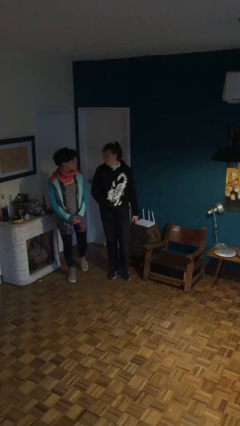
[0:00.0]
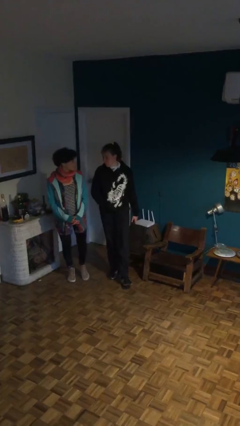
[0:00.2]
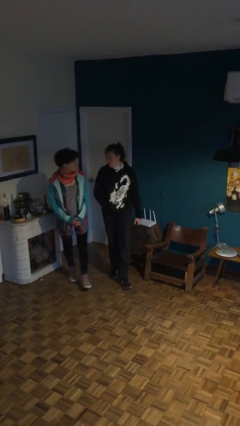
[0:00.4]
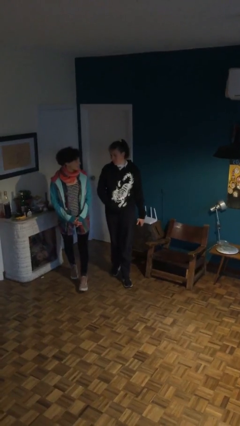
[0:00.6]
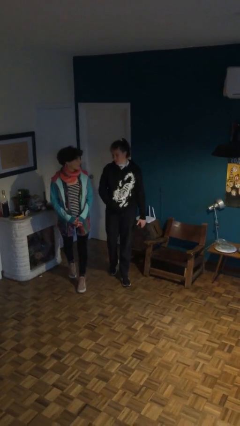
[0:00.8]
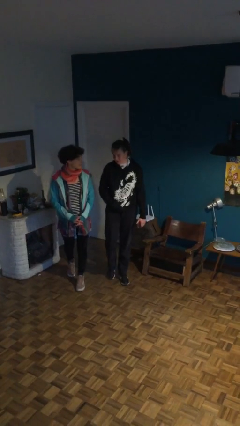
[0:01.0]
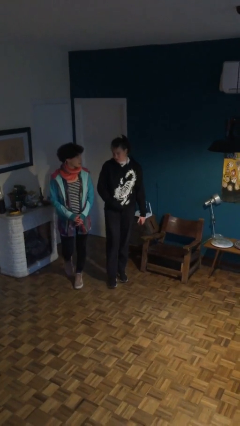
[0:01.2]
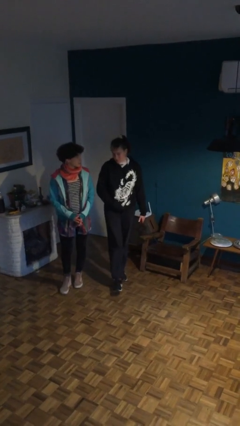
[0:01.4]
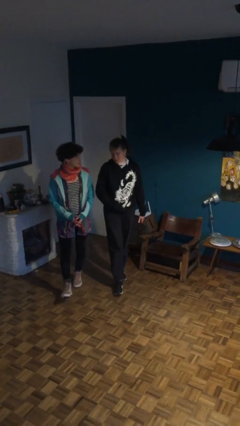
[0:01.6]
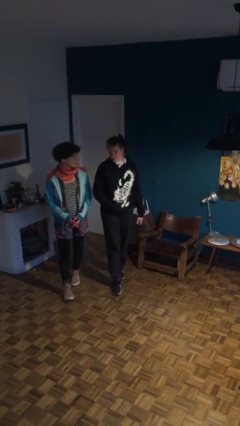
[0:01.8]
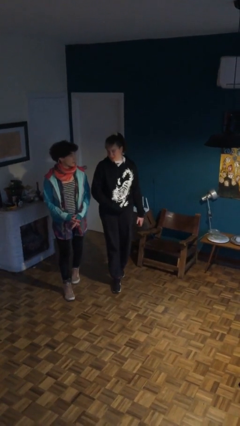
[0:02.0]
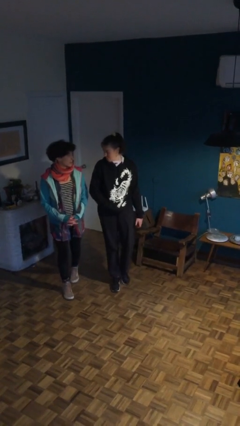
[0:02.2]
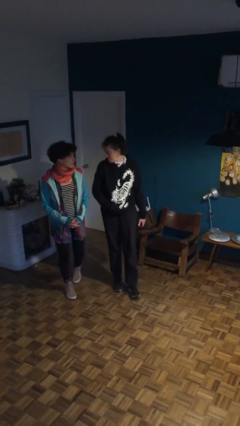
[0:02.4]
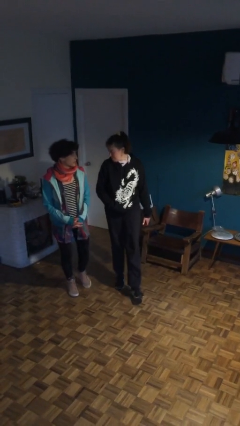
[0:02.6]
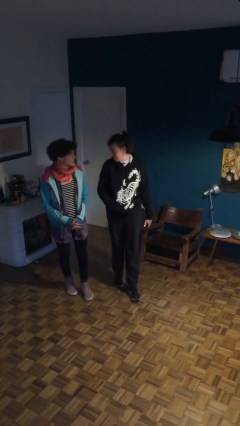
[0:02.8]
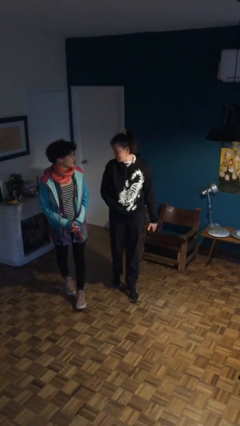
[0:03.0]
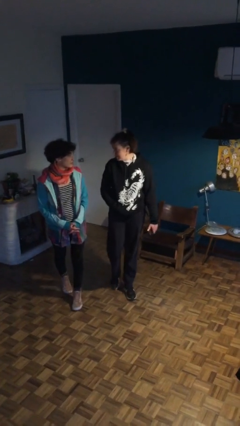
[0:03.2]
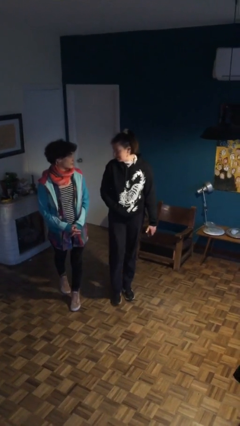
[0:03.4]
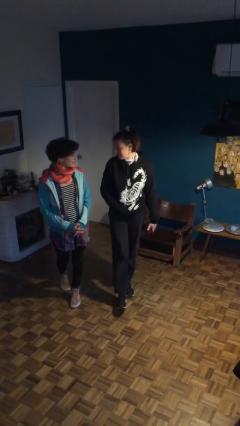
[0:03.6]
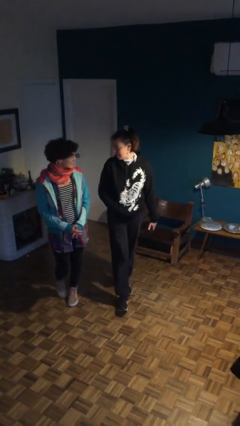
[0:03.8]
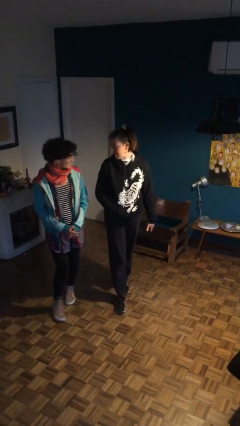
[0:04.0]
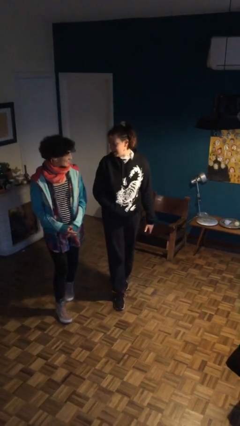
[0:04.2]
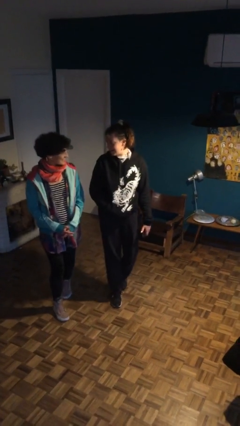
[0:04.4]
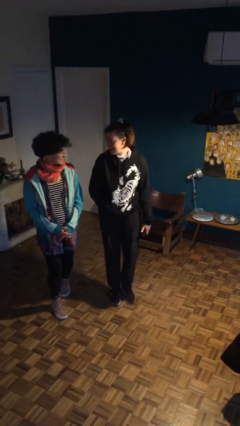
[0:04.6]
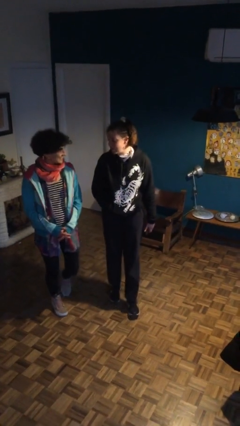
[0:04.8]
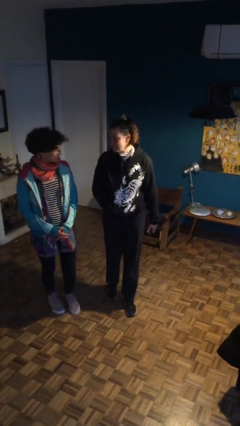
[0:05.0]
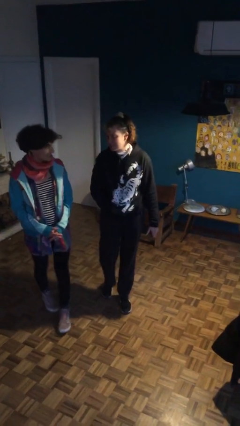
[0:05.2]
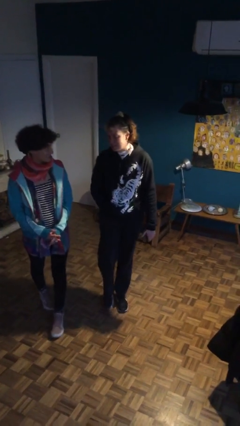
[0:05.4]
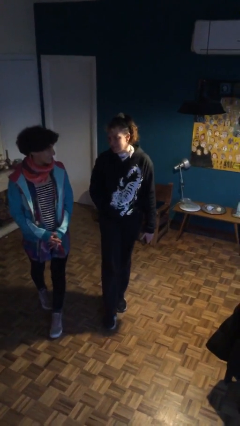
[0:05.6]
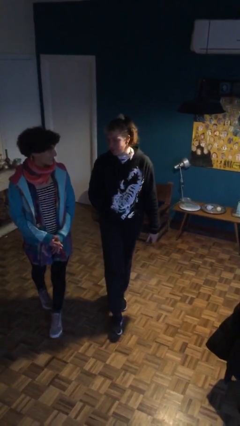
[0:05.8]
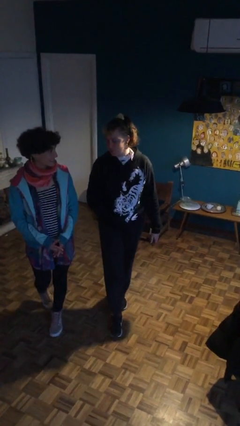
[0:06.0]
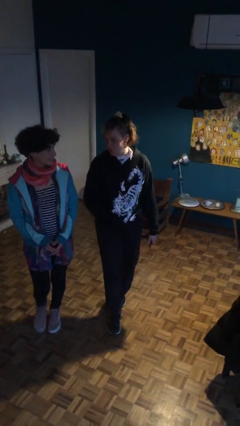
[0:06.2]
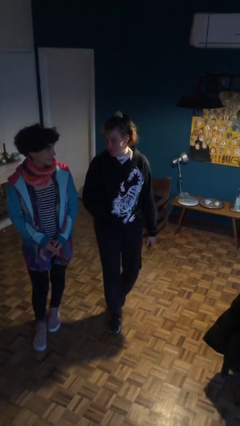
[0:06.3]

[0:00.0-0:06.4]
person talks to person

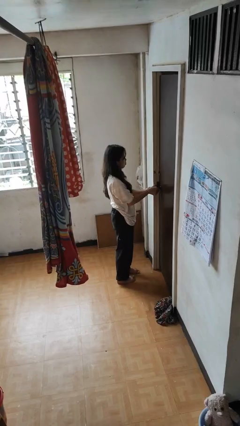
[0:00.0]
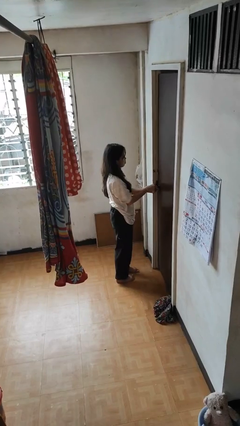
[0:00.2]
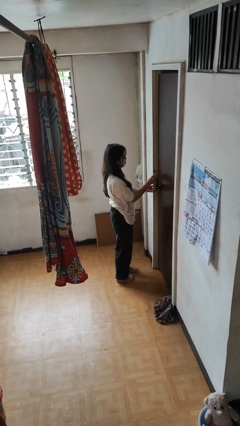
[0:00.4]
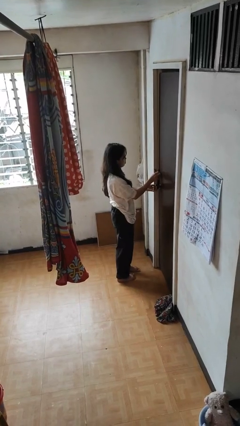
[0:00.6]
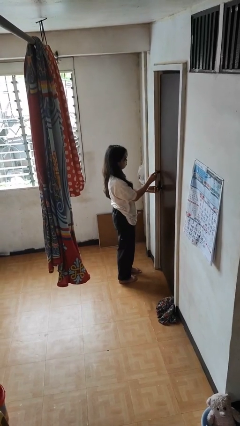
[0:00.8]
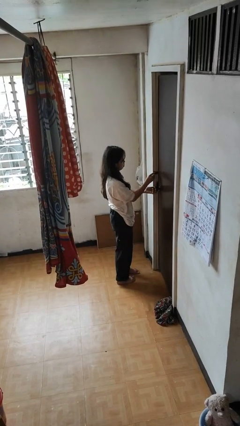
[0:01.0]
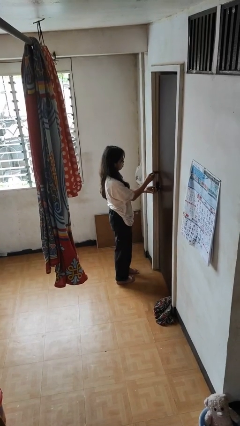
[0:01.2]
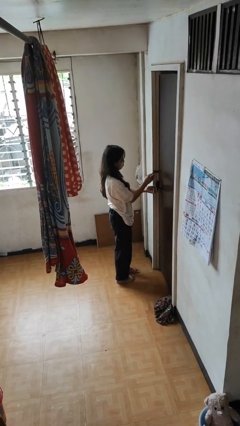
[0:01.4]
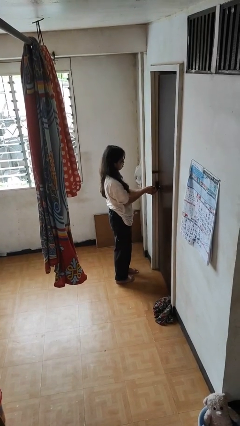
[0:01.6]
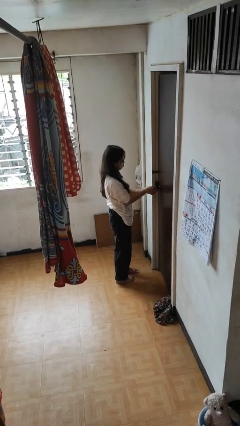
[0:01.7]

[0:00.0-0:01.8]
person locks door with keys

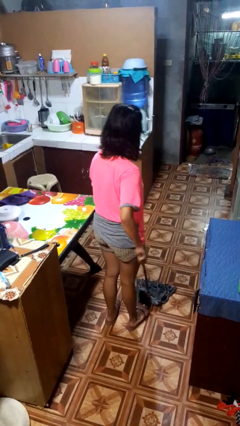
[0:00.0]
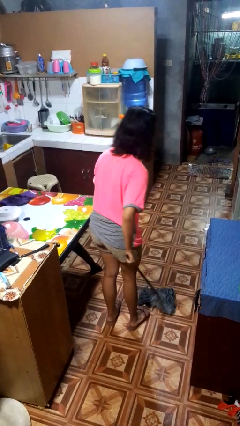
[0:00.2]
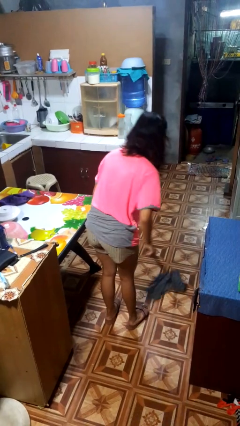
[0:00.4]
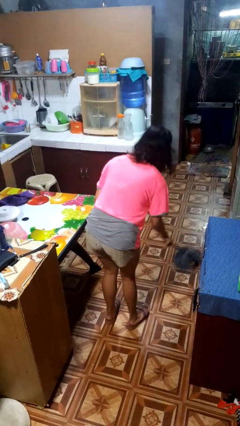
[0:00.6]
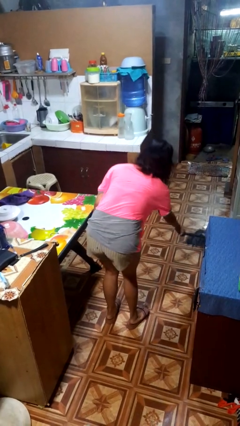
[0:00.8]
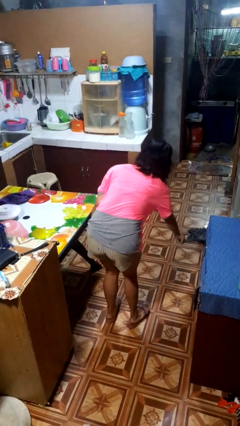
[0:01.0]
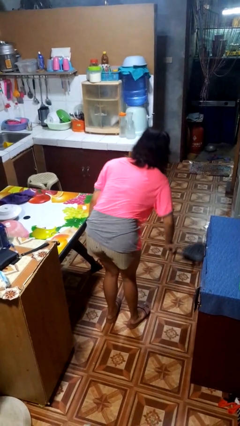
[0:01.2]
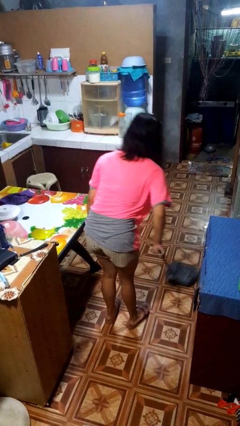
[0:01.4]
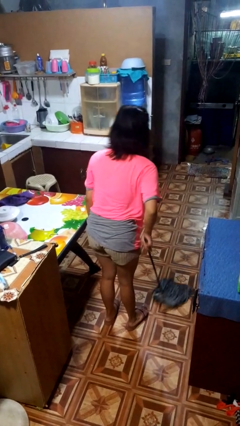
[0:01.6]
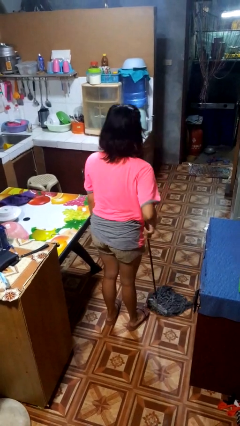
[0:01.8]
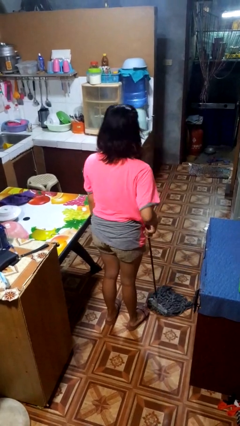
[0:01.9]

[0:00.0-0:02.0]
person mops

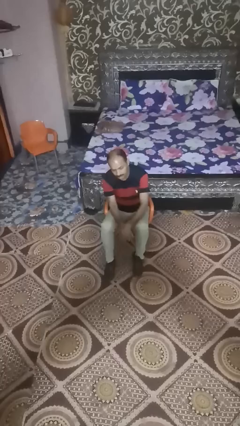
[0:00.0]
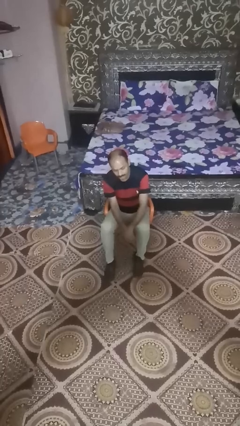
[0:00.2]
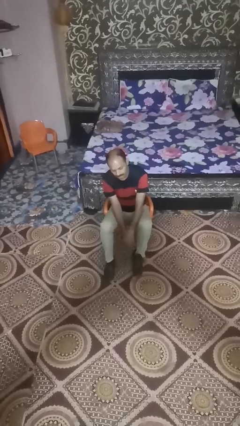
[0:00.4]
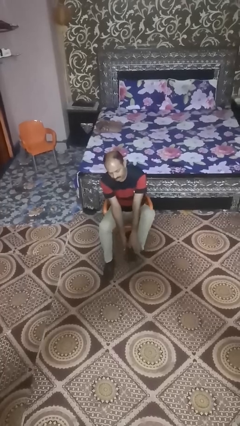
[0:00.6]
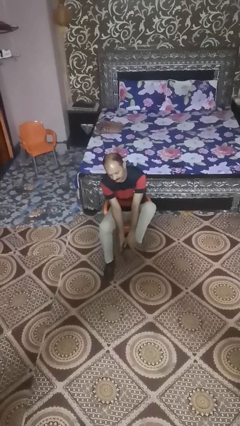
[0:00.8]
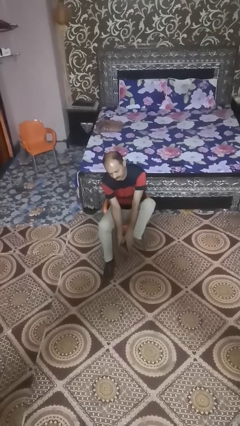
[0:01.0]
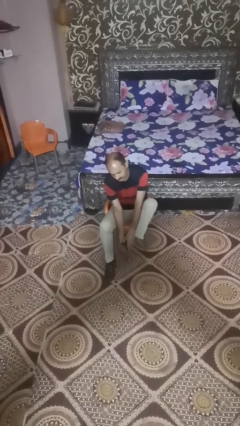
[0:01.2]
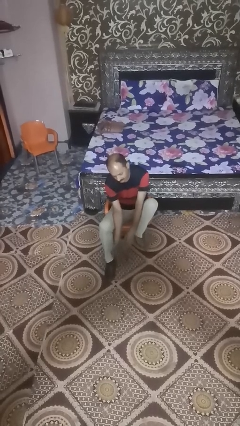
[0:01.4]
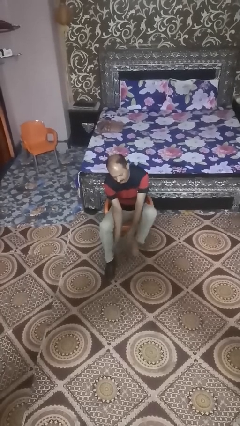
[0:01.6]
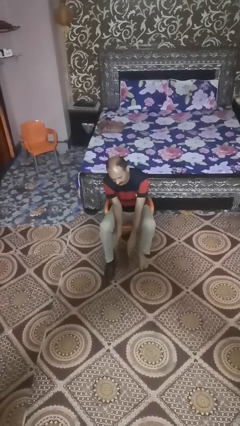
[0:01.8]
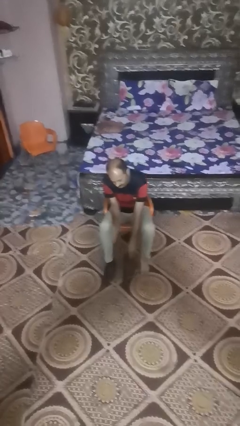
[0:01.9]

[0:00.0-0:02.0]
person takes off boots

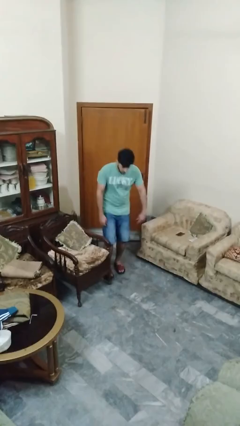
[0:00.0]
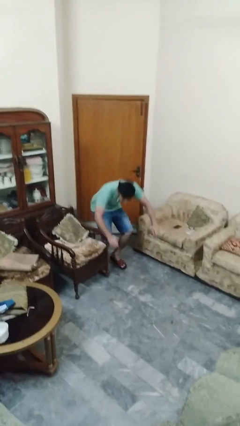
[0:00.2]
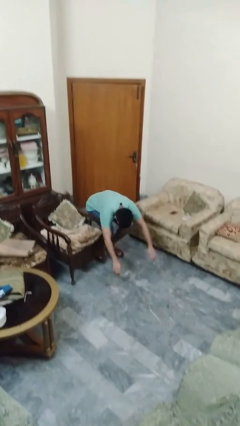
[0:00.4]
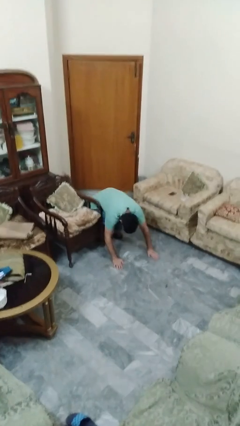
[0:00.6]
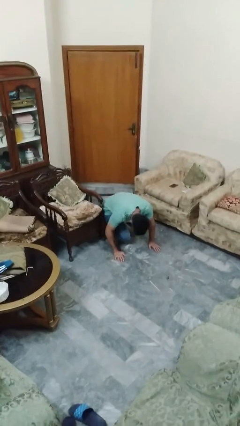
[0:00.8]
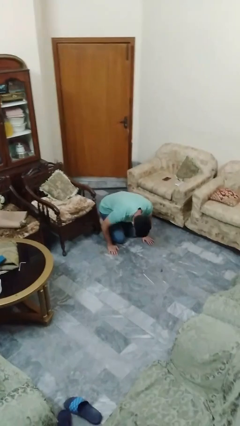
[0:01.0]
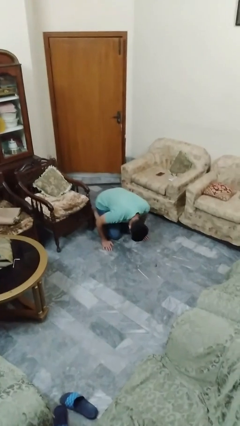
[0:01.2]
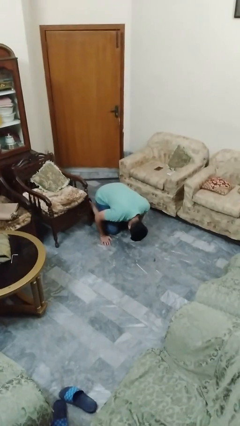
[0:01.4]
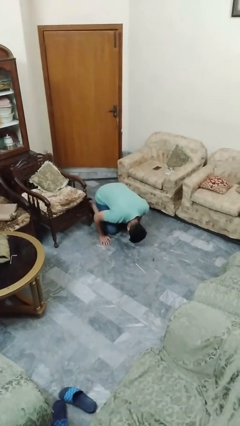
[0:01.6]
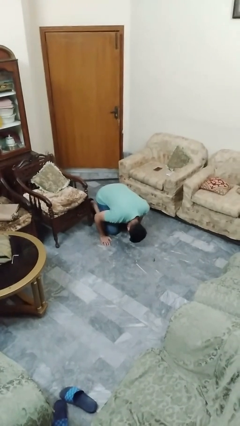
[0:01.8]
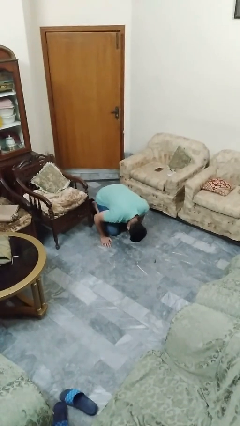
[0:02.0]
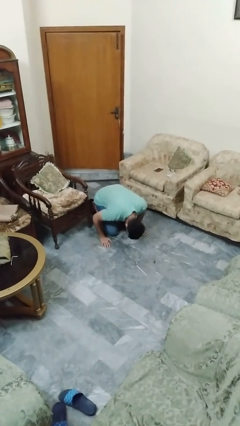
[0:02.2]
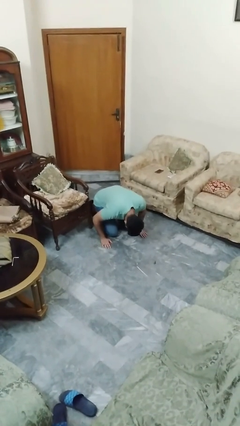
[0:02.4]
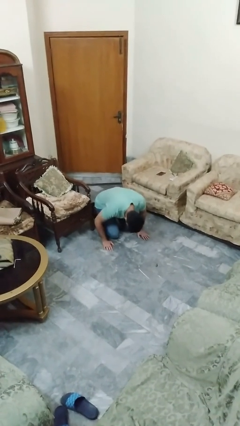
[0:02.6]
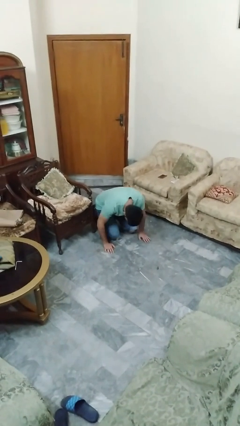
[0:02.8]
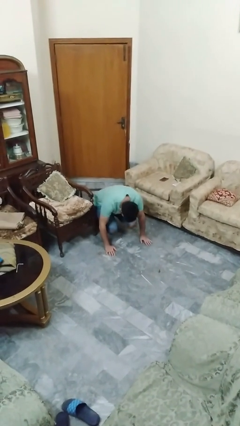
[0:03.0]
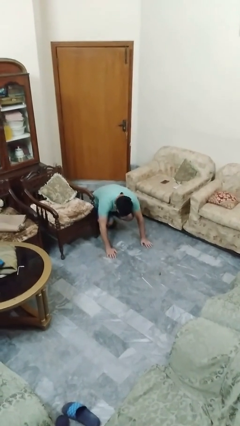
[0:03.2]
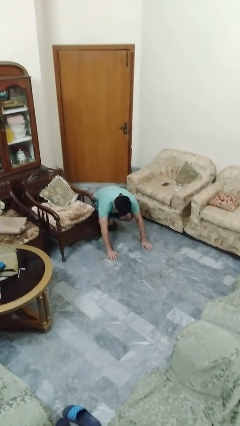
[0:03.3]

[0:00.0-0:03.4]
person trips on object on floor

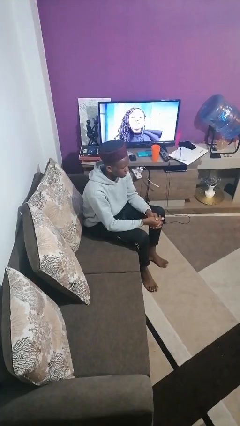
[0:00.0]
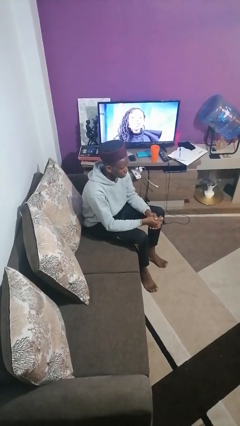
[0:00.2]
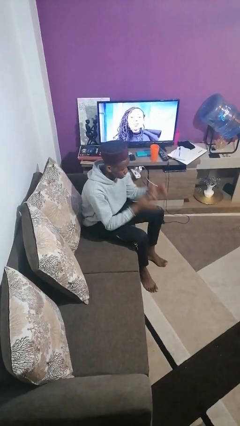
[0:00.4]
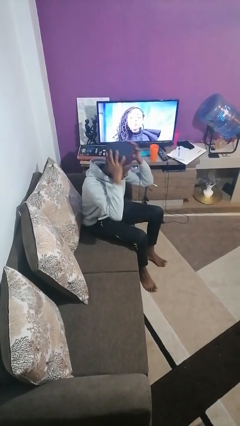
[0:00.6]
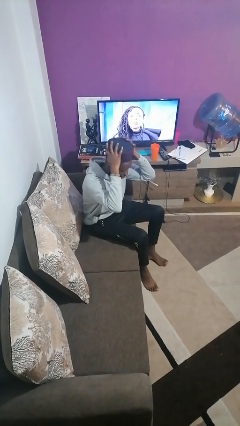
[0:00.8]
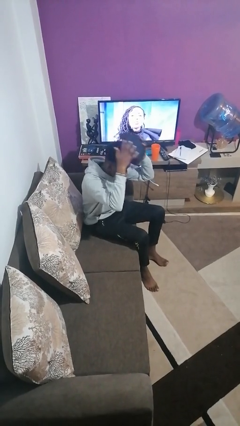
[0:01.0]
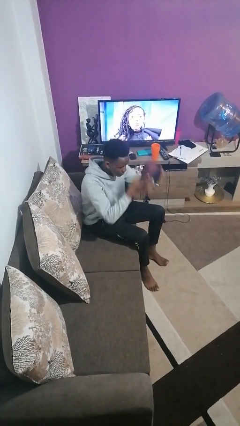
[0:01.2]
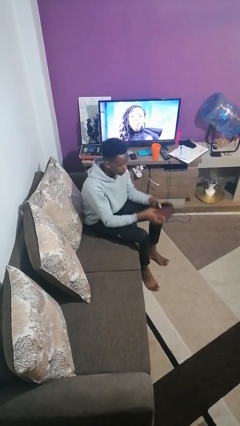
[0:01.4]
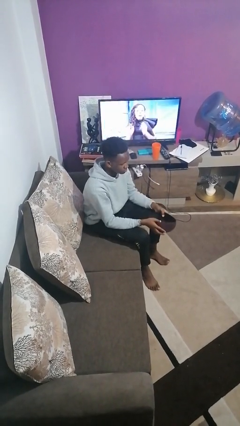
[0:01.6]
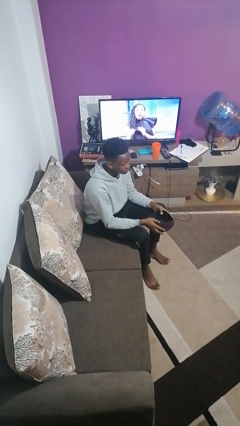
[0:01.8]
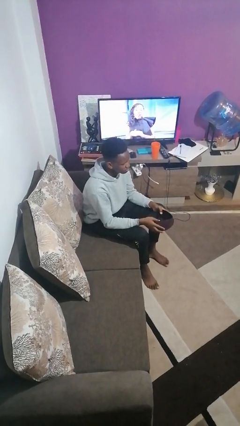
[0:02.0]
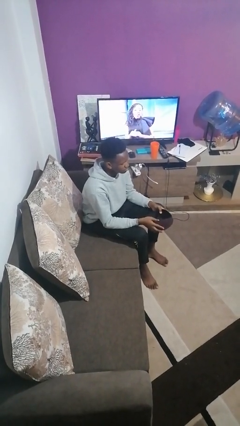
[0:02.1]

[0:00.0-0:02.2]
person takes off hat
